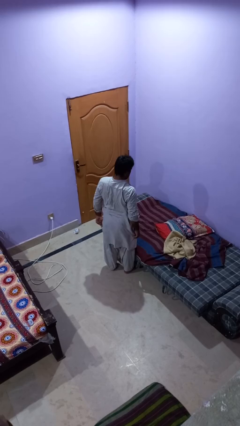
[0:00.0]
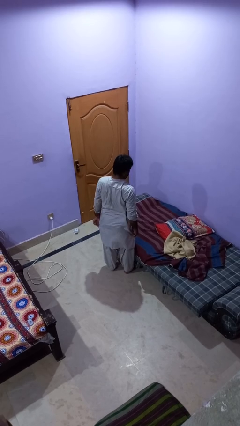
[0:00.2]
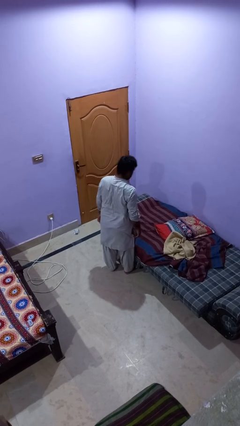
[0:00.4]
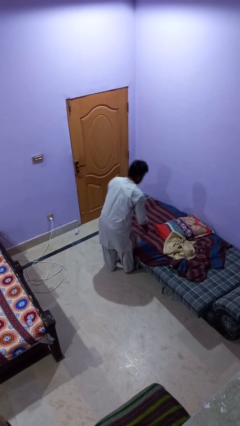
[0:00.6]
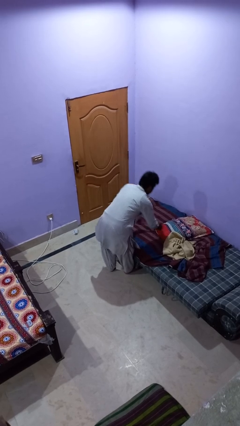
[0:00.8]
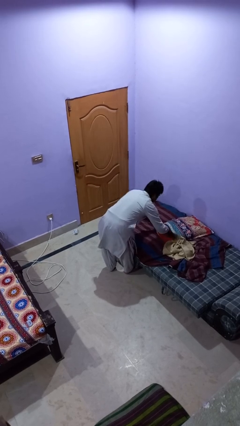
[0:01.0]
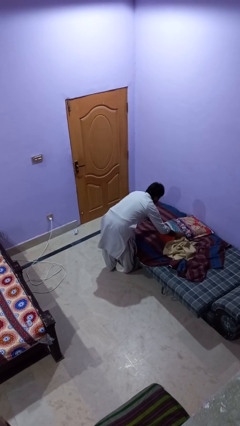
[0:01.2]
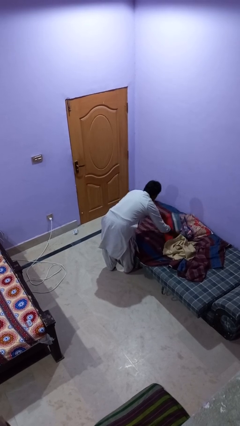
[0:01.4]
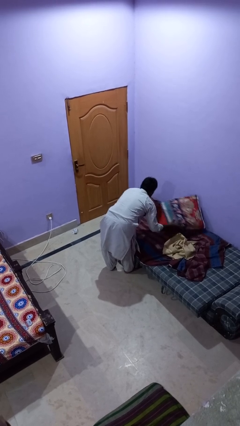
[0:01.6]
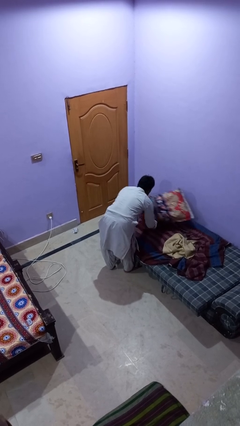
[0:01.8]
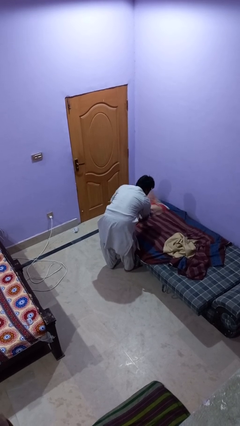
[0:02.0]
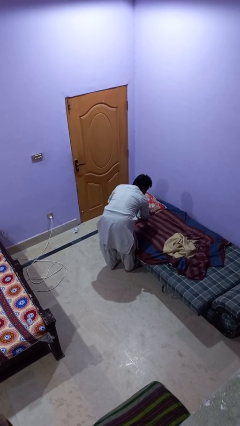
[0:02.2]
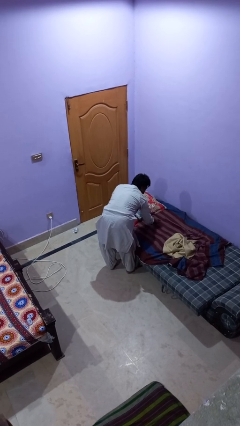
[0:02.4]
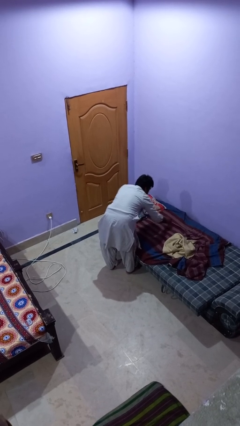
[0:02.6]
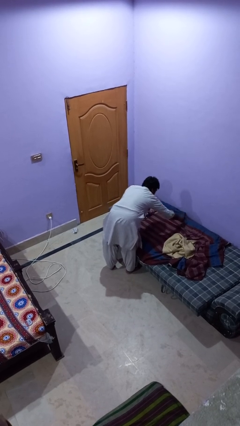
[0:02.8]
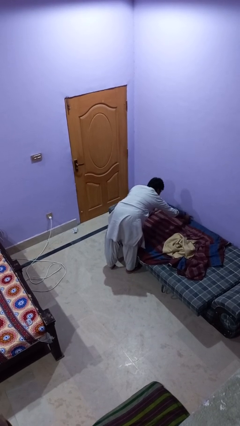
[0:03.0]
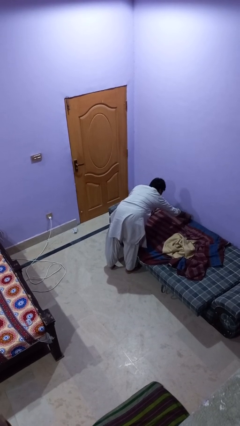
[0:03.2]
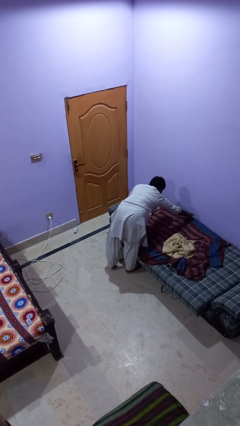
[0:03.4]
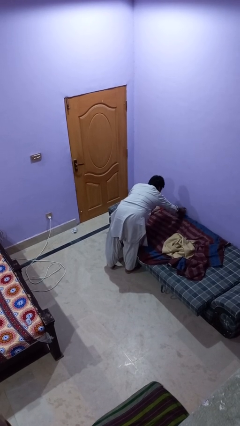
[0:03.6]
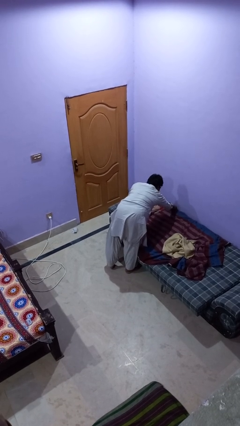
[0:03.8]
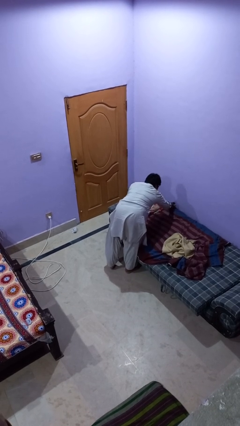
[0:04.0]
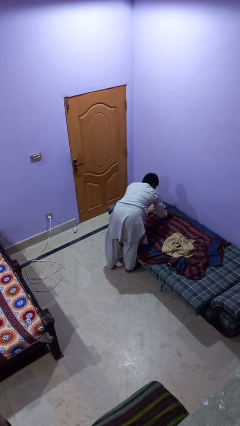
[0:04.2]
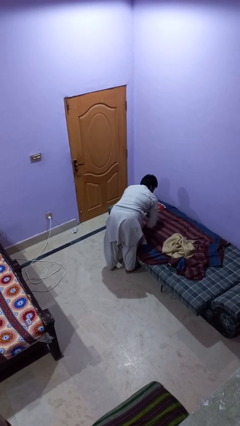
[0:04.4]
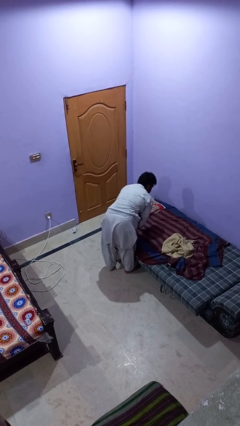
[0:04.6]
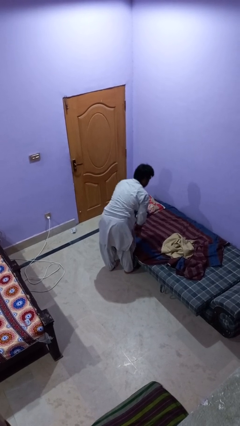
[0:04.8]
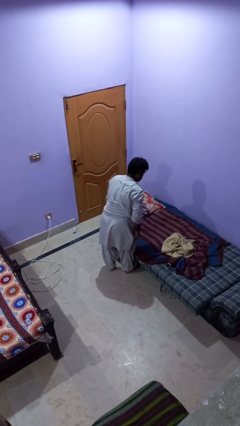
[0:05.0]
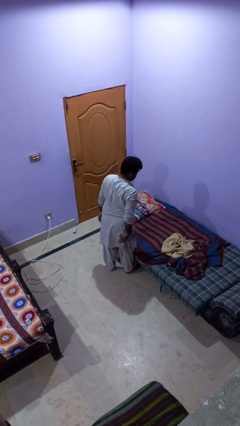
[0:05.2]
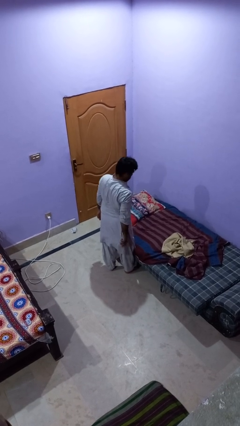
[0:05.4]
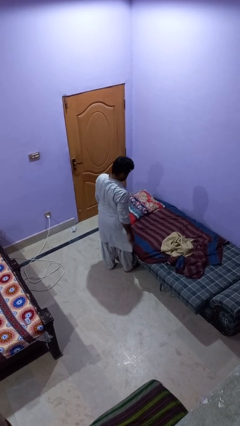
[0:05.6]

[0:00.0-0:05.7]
person makes bed

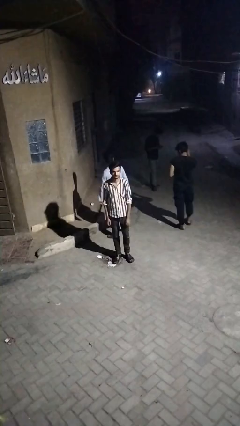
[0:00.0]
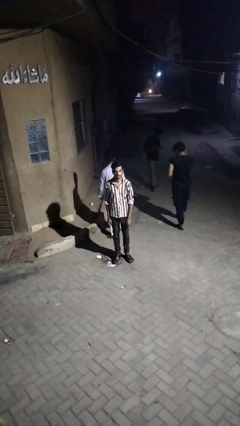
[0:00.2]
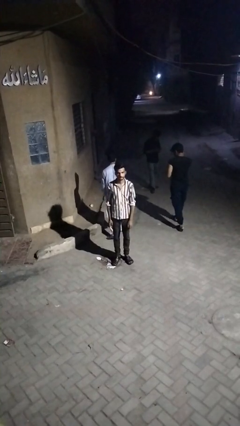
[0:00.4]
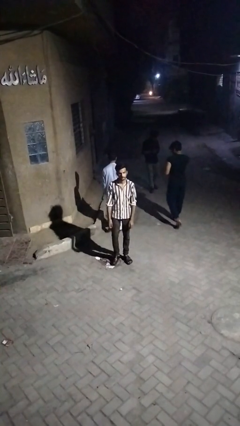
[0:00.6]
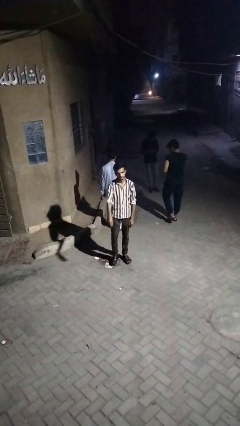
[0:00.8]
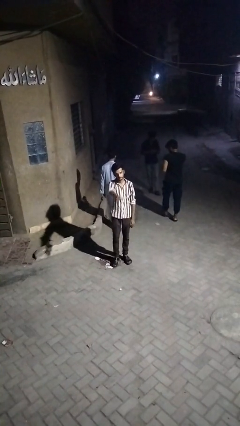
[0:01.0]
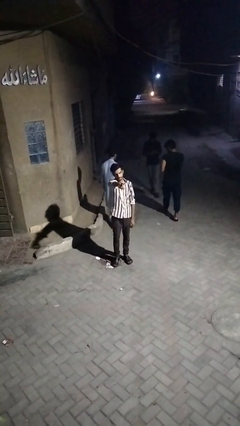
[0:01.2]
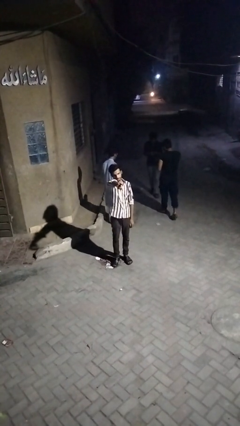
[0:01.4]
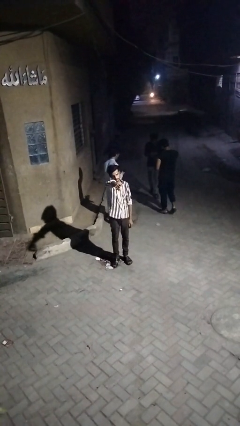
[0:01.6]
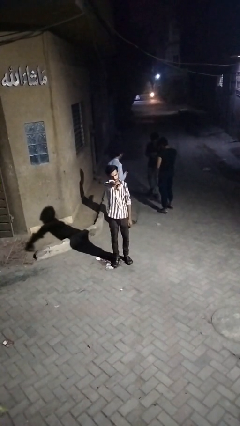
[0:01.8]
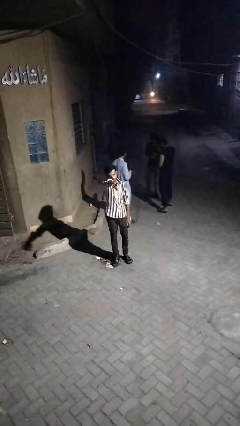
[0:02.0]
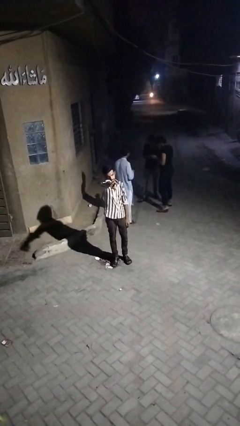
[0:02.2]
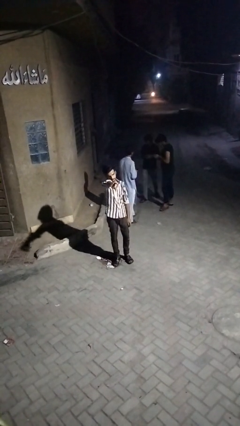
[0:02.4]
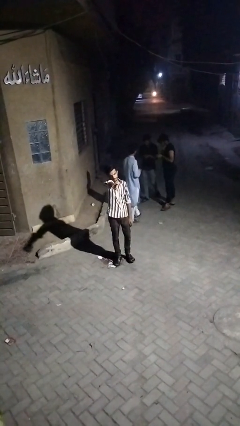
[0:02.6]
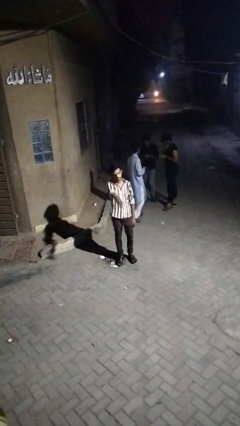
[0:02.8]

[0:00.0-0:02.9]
person points at person

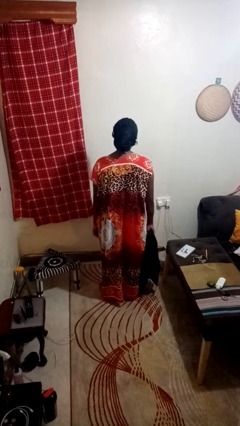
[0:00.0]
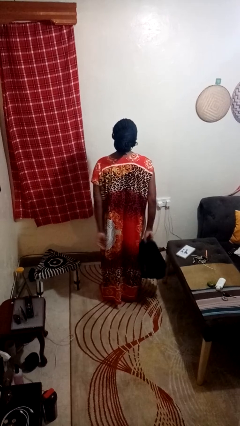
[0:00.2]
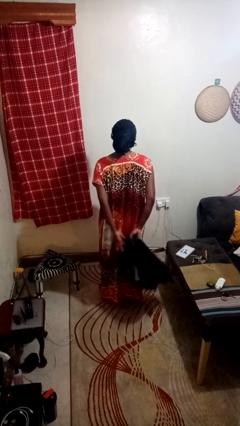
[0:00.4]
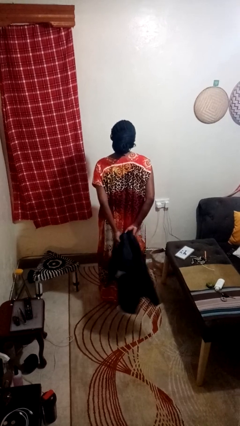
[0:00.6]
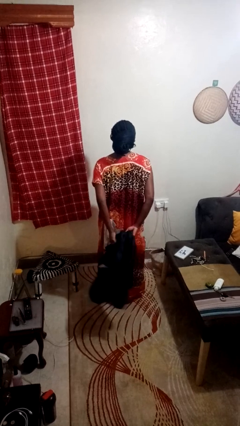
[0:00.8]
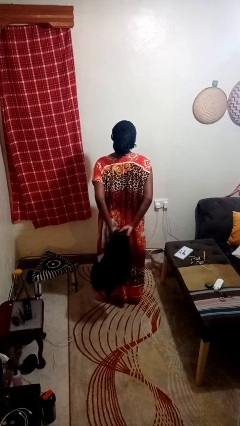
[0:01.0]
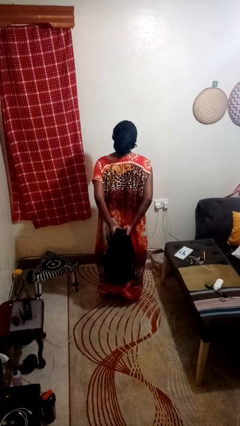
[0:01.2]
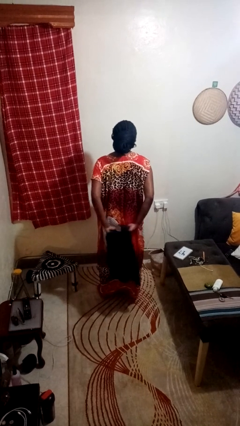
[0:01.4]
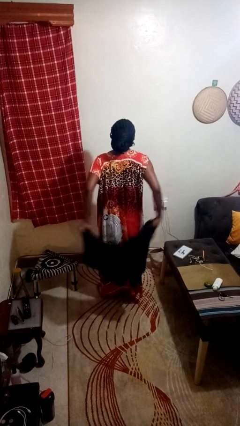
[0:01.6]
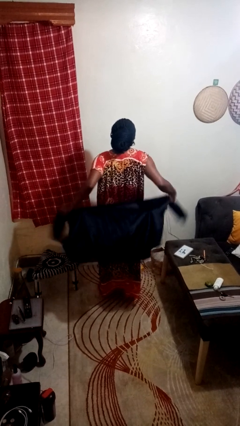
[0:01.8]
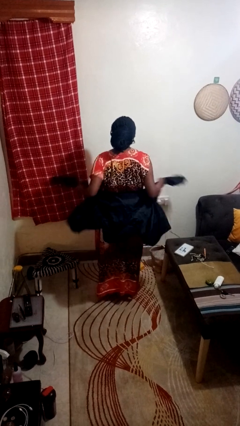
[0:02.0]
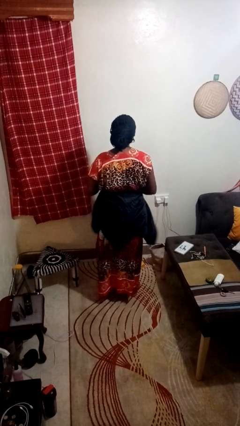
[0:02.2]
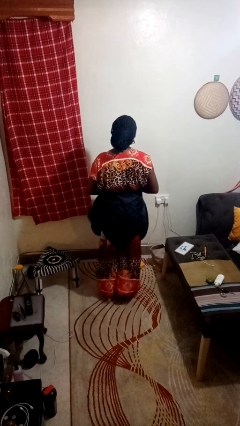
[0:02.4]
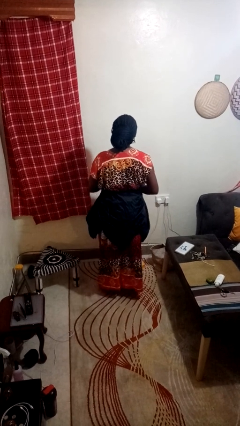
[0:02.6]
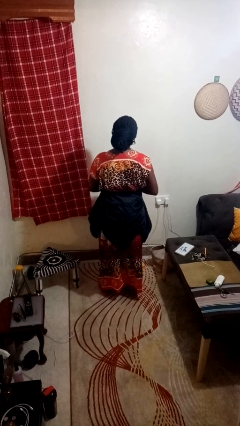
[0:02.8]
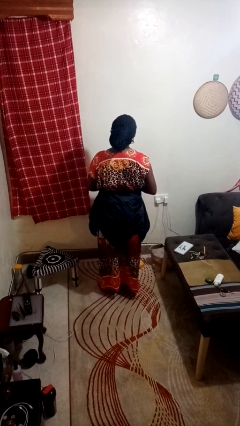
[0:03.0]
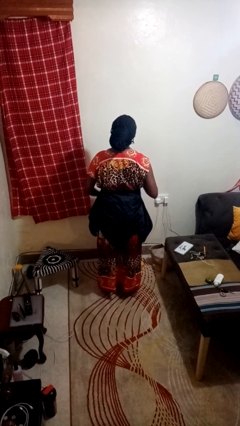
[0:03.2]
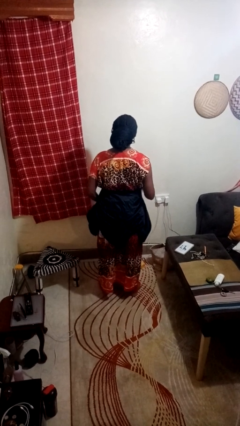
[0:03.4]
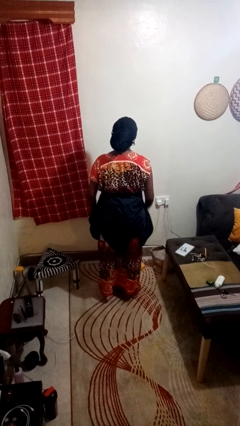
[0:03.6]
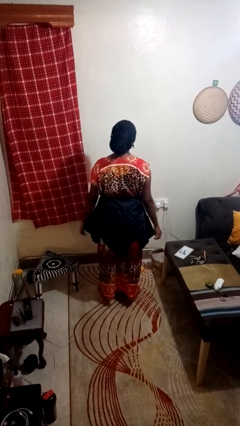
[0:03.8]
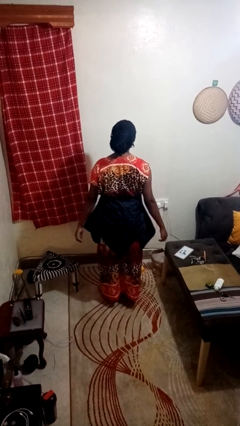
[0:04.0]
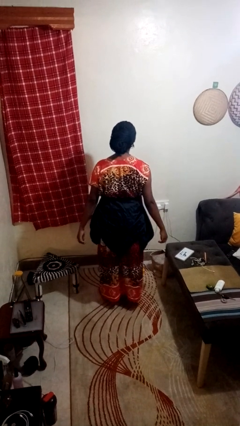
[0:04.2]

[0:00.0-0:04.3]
person ties jacket around waist

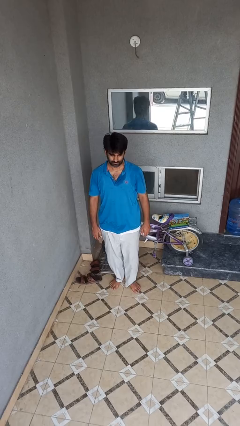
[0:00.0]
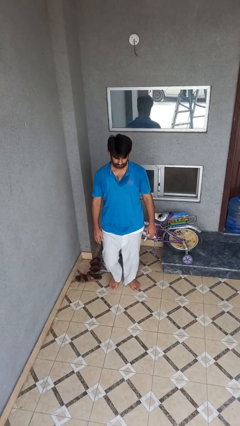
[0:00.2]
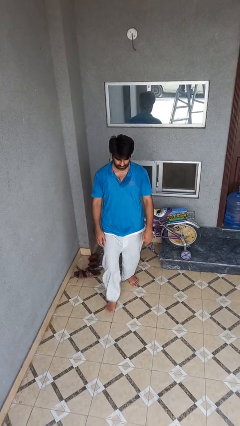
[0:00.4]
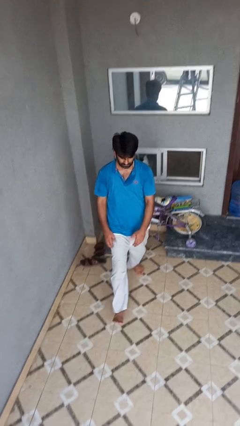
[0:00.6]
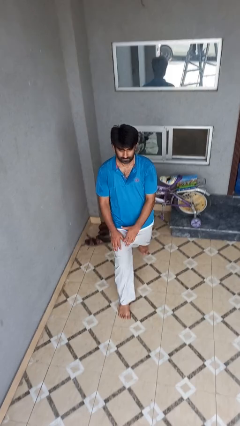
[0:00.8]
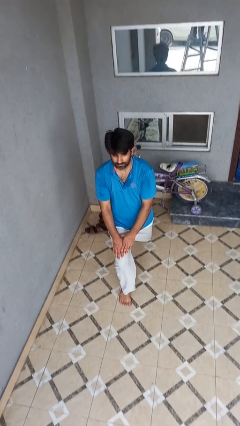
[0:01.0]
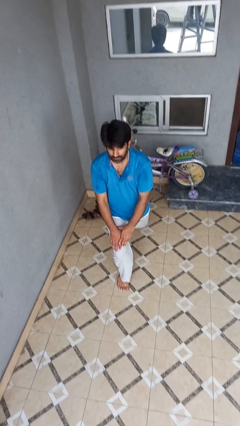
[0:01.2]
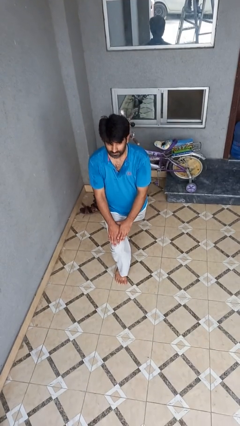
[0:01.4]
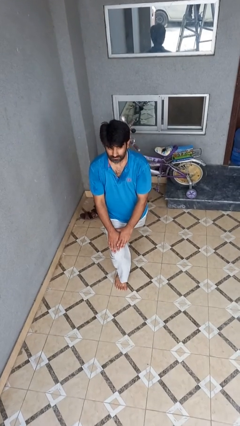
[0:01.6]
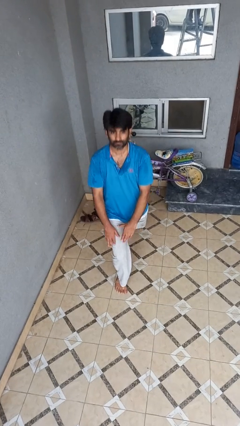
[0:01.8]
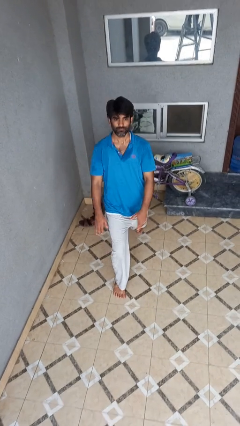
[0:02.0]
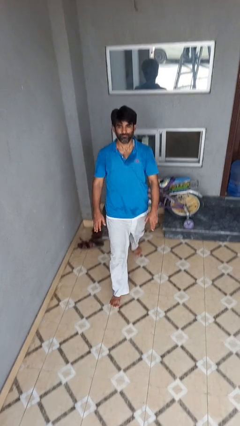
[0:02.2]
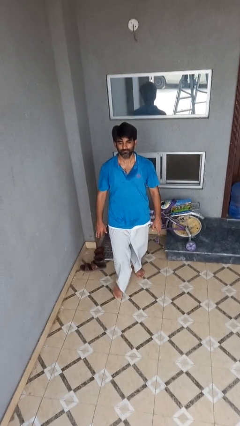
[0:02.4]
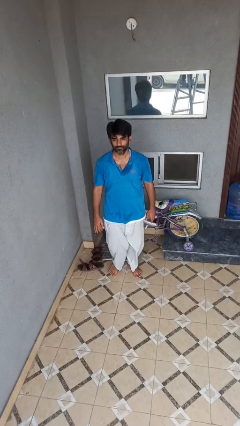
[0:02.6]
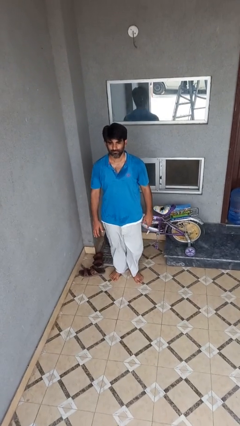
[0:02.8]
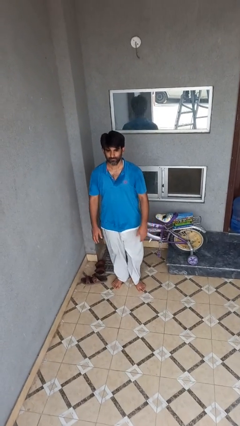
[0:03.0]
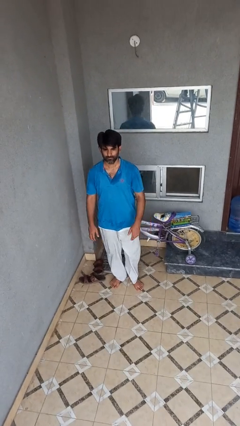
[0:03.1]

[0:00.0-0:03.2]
person exercises with lunges

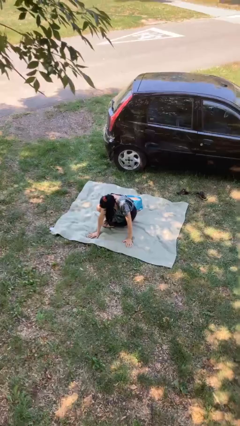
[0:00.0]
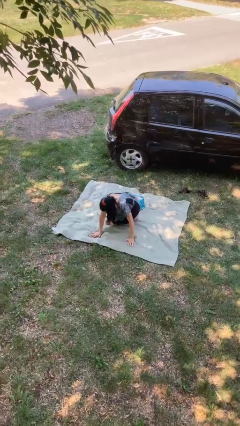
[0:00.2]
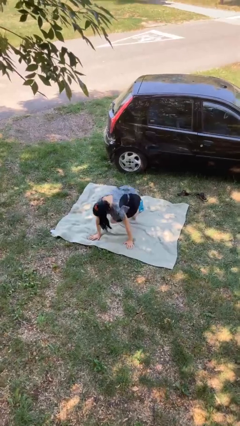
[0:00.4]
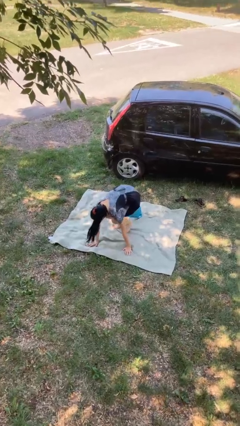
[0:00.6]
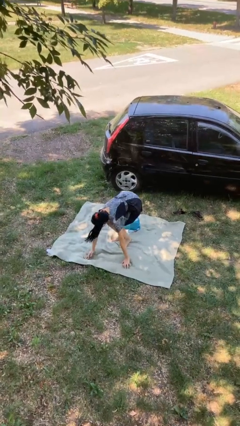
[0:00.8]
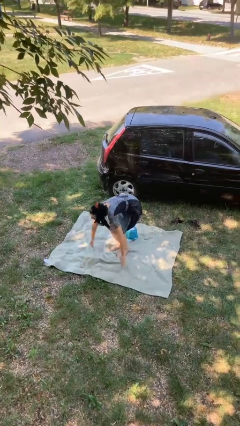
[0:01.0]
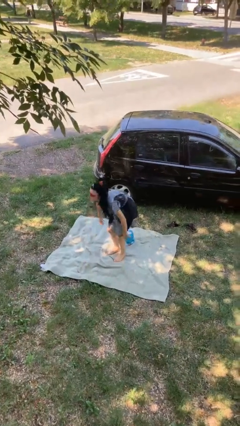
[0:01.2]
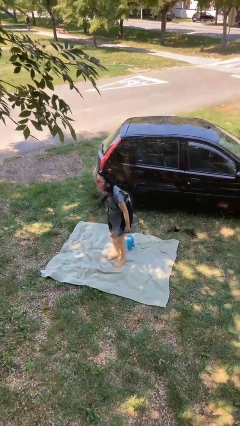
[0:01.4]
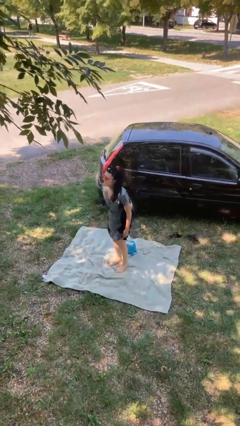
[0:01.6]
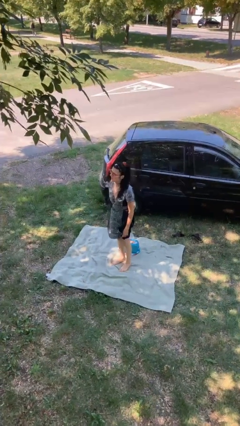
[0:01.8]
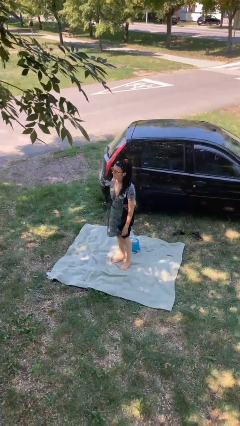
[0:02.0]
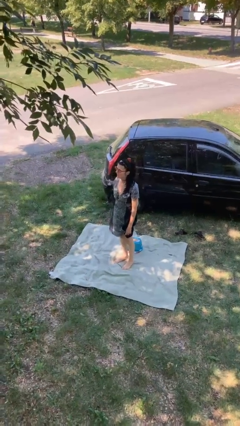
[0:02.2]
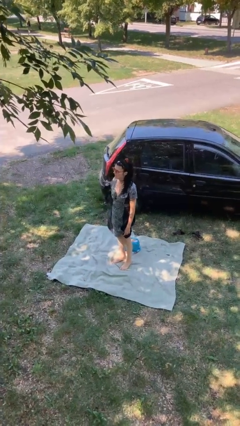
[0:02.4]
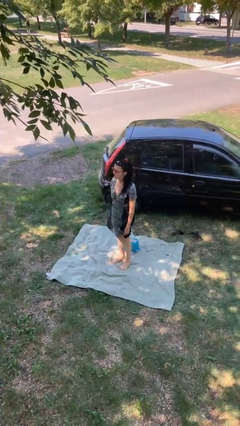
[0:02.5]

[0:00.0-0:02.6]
person stands up from floor
